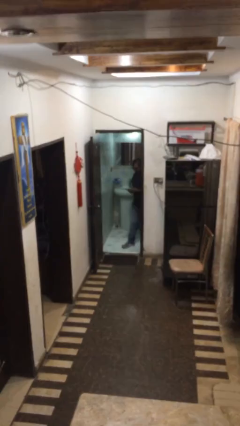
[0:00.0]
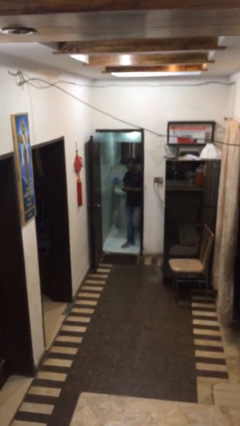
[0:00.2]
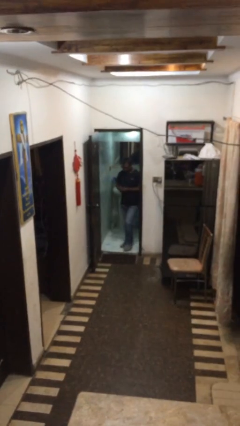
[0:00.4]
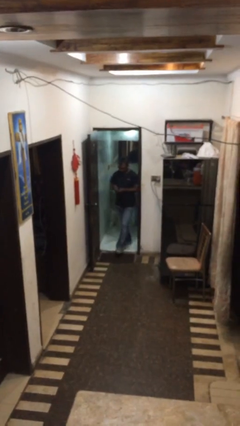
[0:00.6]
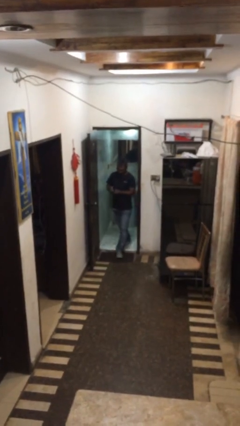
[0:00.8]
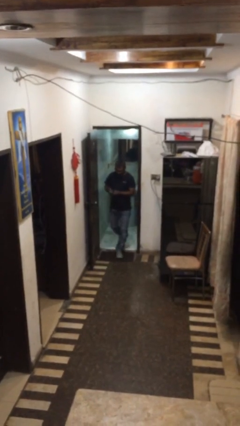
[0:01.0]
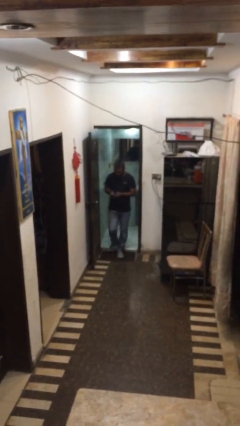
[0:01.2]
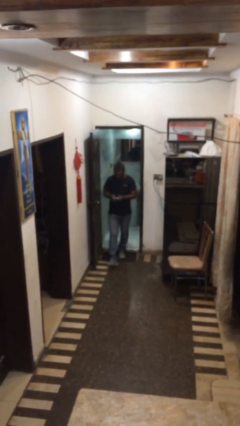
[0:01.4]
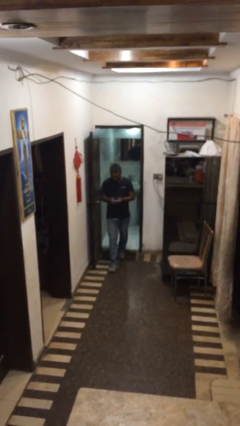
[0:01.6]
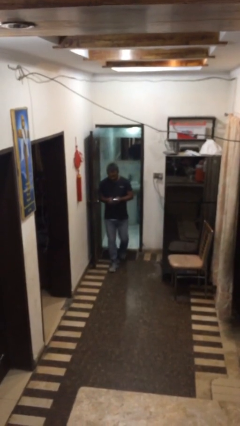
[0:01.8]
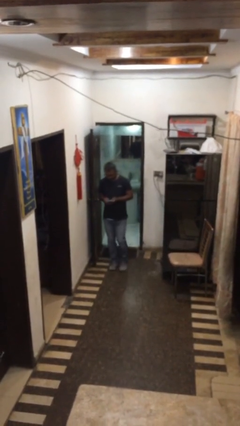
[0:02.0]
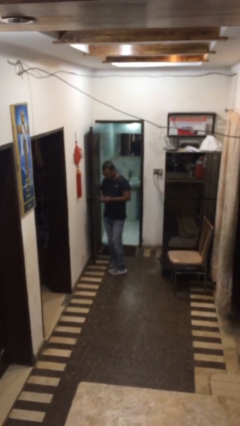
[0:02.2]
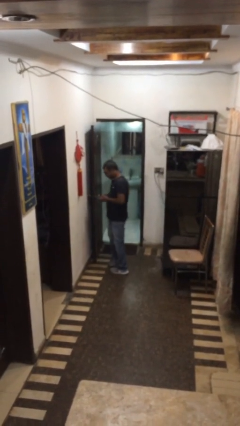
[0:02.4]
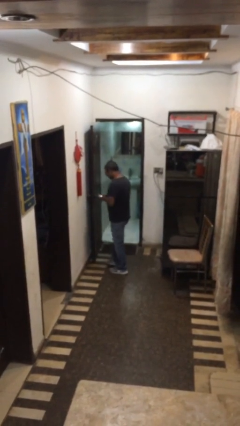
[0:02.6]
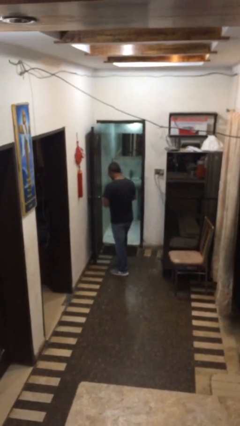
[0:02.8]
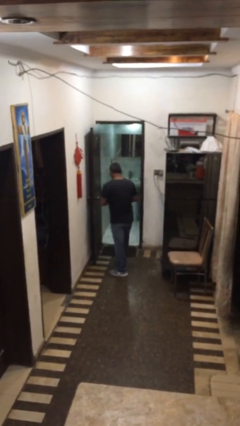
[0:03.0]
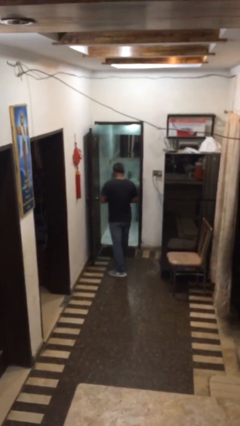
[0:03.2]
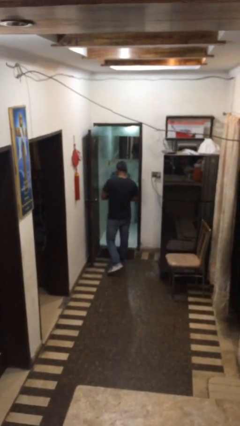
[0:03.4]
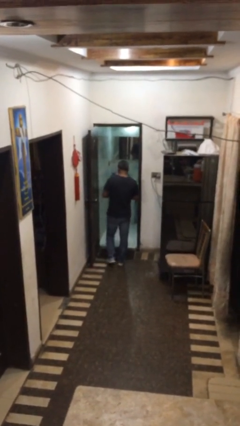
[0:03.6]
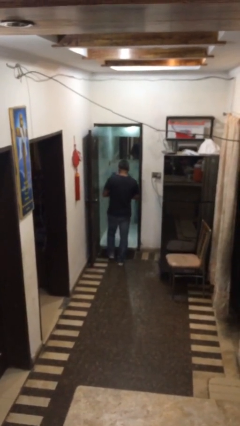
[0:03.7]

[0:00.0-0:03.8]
person enters scene through structure

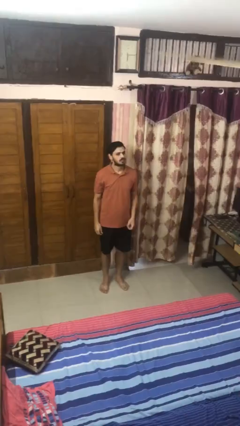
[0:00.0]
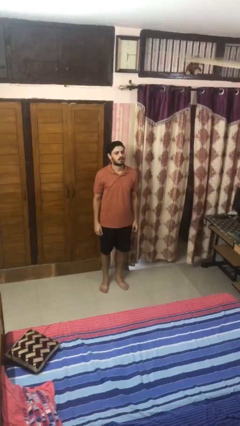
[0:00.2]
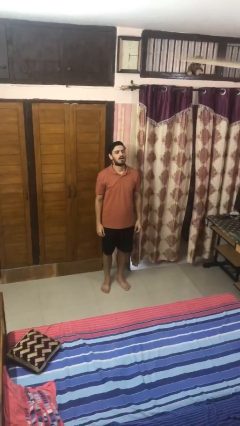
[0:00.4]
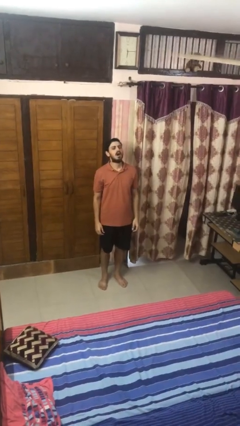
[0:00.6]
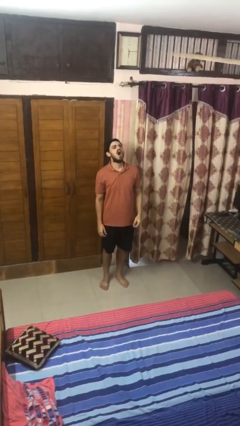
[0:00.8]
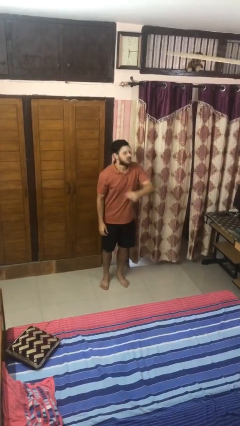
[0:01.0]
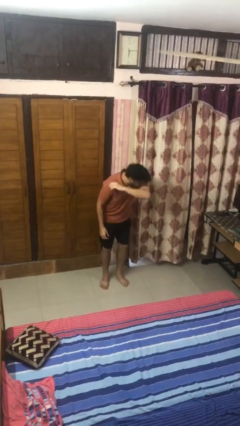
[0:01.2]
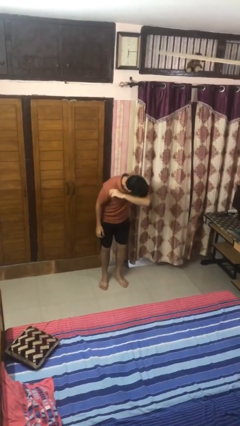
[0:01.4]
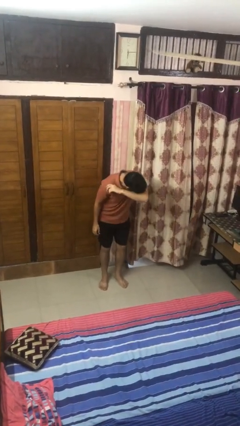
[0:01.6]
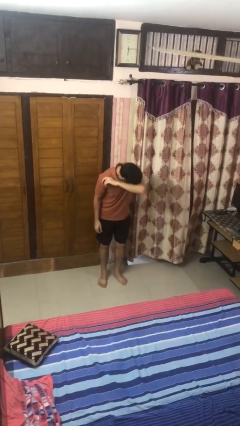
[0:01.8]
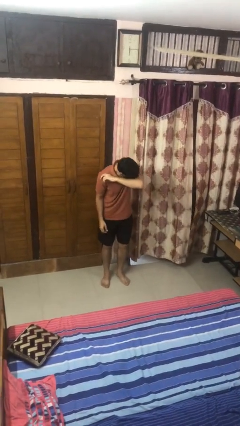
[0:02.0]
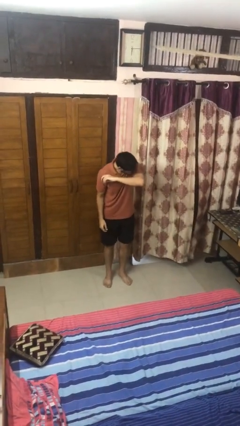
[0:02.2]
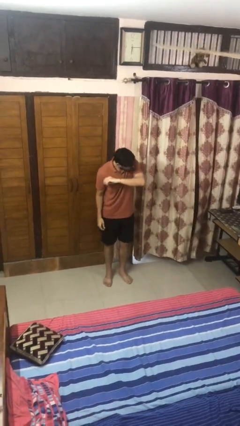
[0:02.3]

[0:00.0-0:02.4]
person sneezes into arm

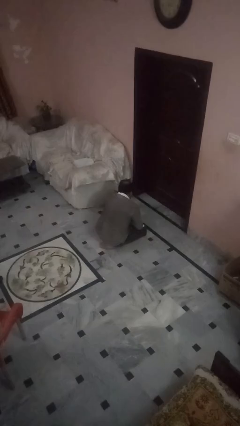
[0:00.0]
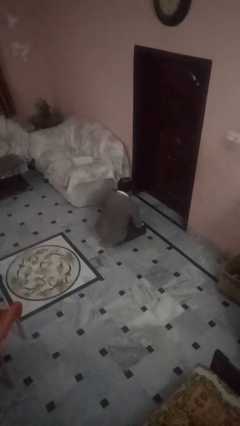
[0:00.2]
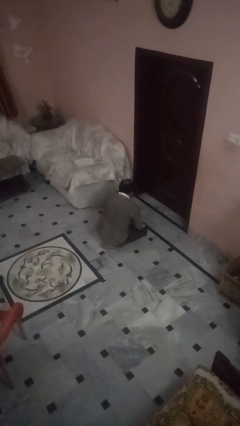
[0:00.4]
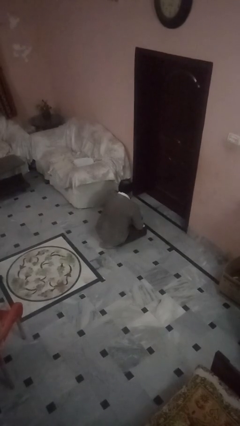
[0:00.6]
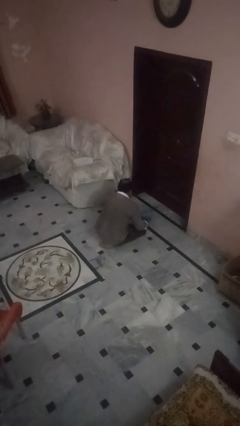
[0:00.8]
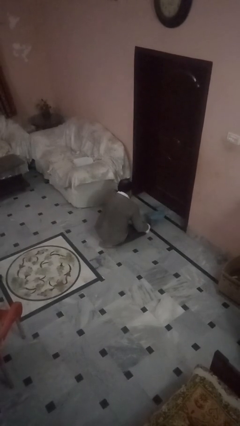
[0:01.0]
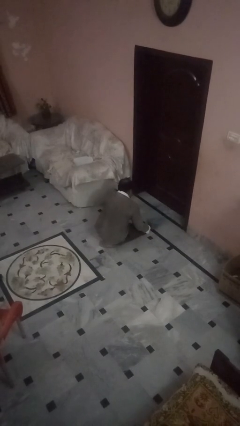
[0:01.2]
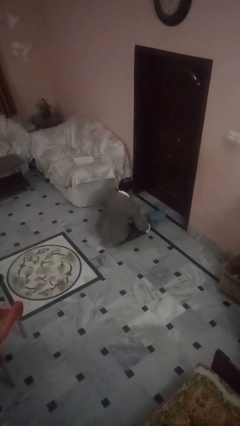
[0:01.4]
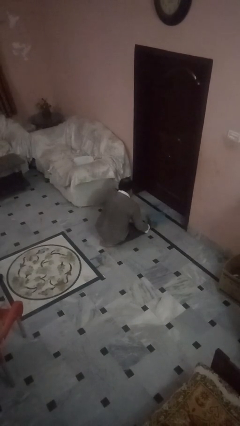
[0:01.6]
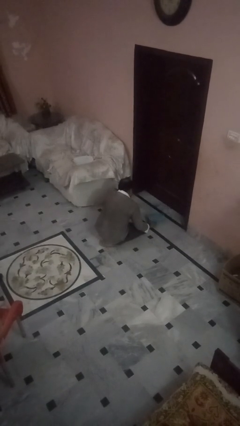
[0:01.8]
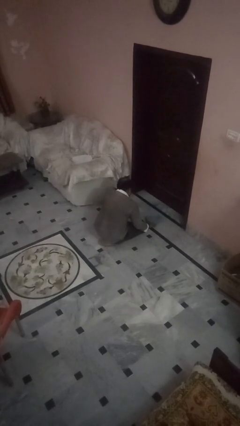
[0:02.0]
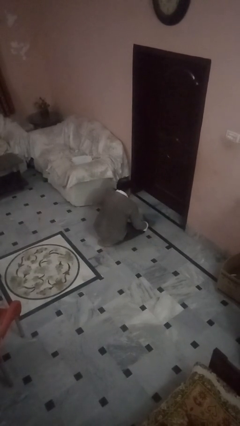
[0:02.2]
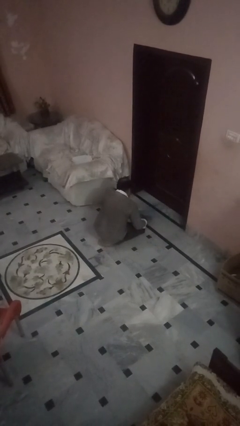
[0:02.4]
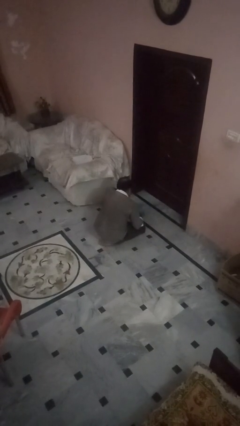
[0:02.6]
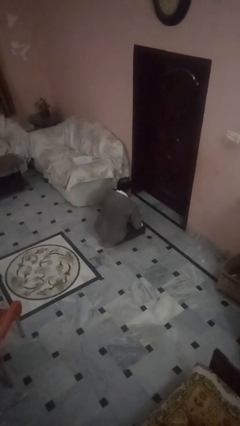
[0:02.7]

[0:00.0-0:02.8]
person swats bug

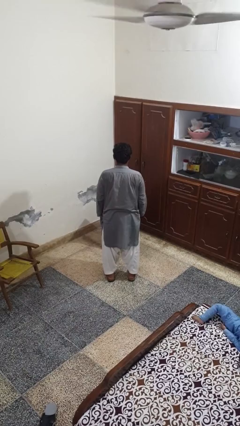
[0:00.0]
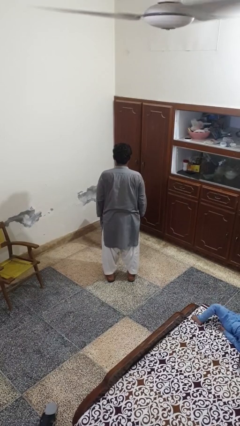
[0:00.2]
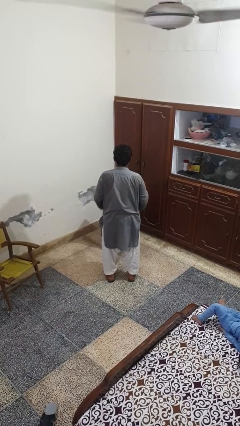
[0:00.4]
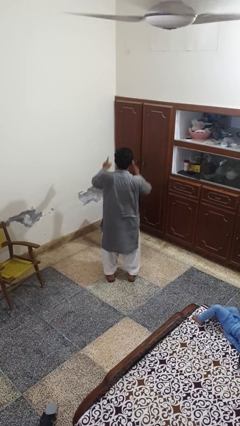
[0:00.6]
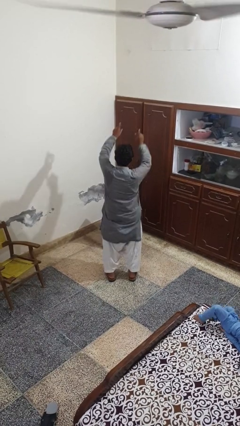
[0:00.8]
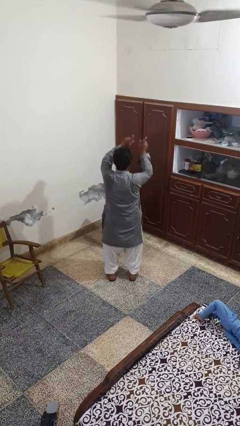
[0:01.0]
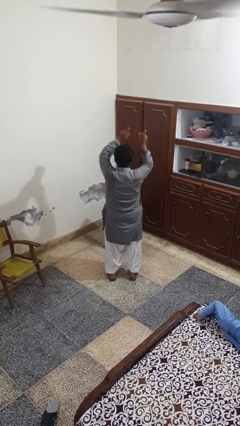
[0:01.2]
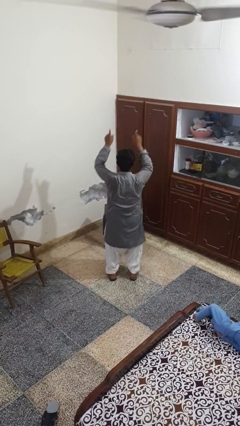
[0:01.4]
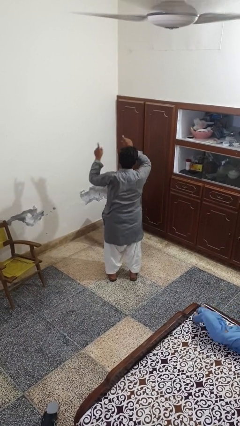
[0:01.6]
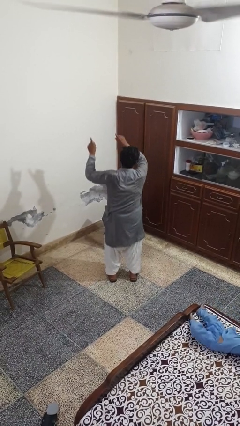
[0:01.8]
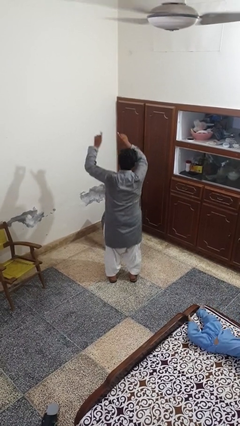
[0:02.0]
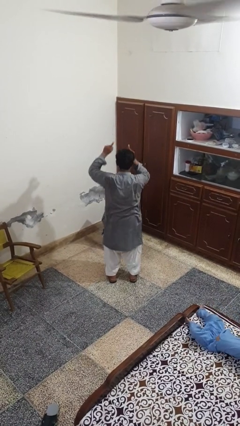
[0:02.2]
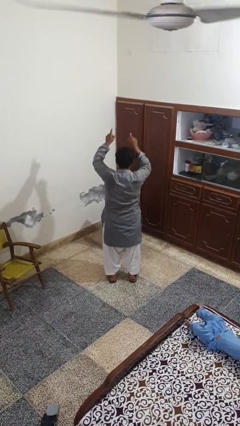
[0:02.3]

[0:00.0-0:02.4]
person dances in place

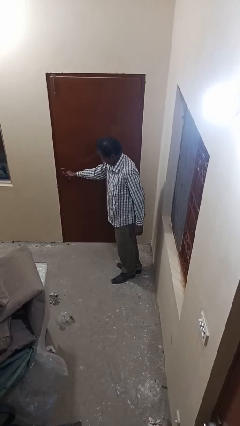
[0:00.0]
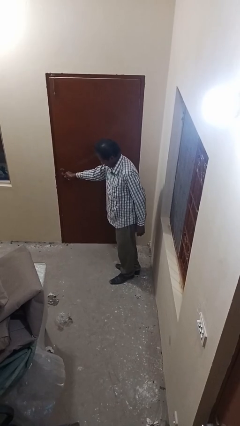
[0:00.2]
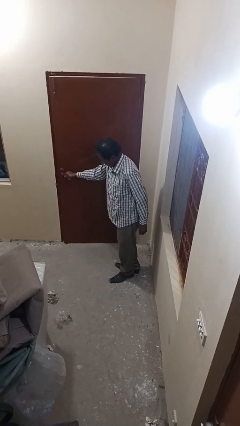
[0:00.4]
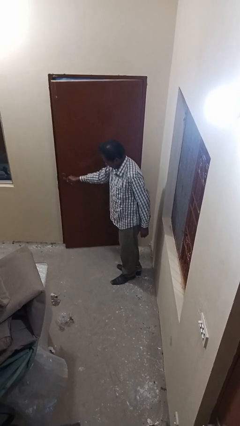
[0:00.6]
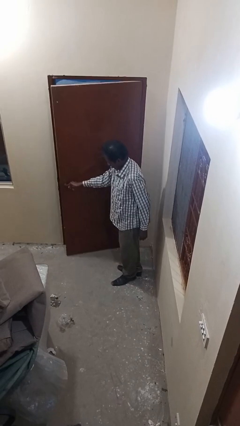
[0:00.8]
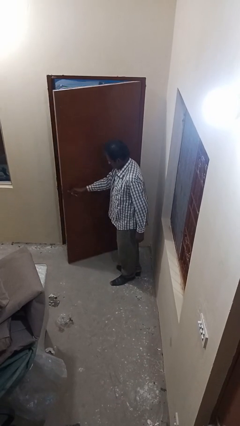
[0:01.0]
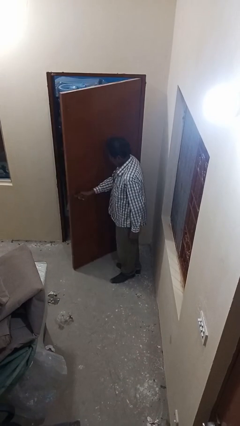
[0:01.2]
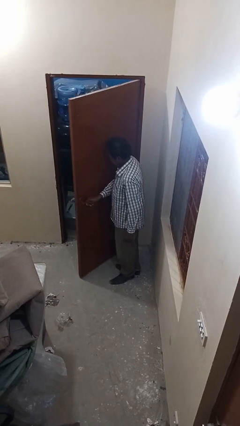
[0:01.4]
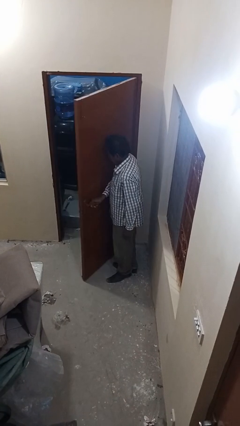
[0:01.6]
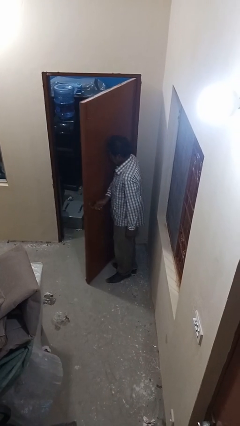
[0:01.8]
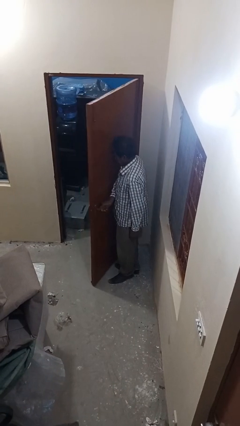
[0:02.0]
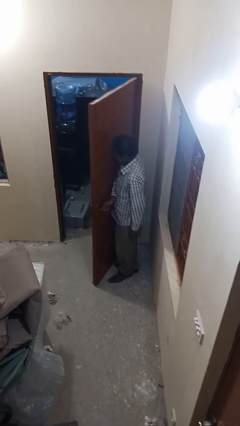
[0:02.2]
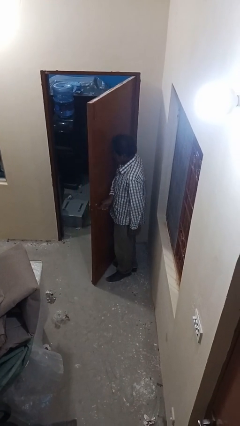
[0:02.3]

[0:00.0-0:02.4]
person opens facility door

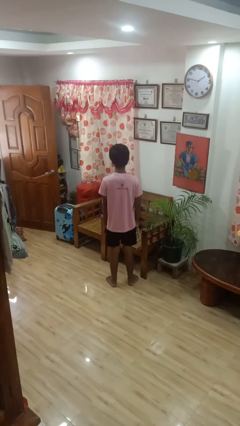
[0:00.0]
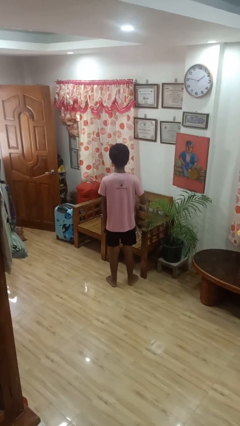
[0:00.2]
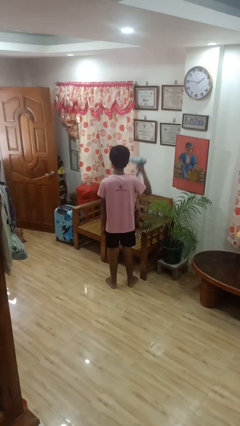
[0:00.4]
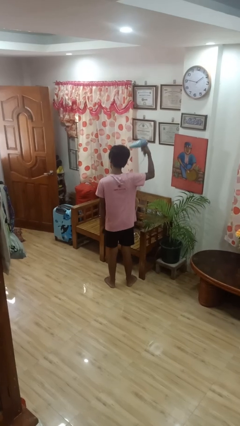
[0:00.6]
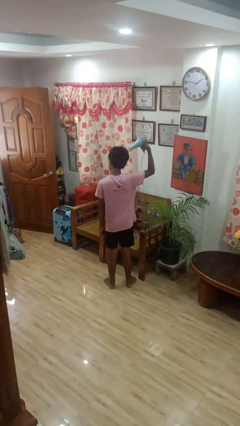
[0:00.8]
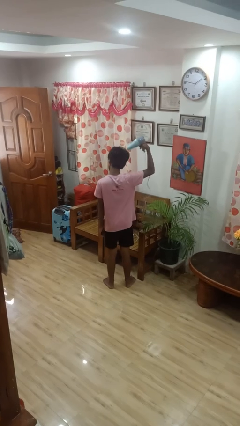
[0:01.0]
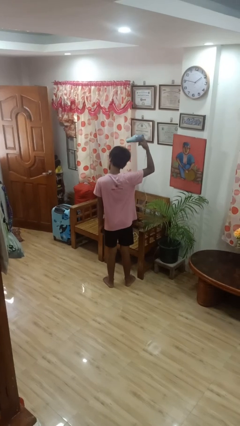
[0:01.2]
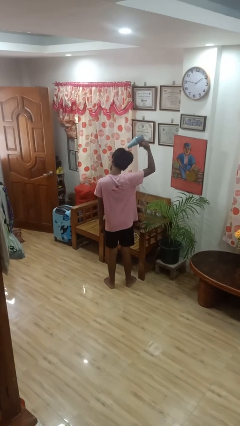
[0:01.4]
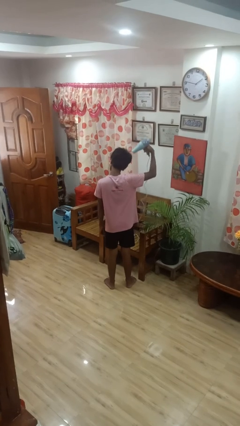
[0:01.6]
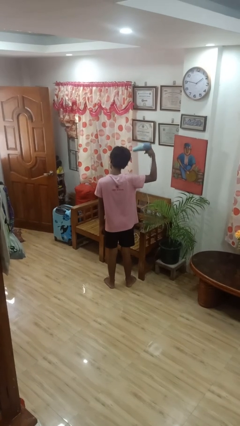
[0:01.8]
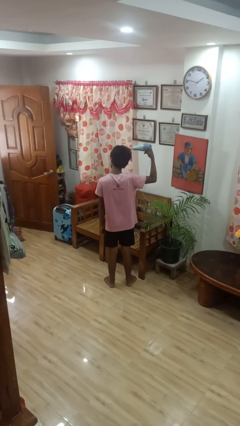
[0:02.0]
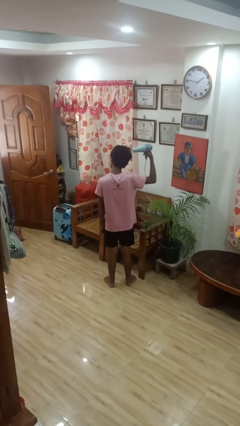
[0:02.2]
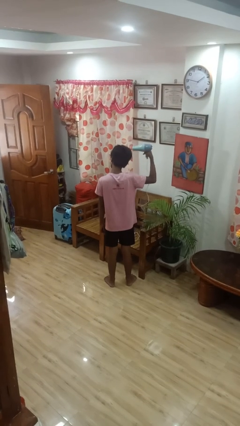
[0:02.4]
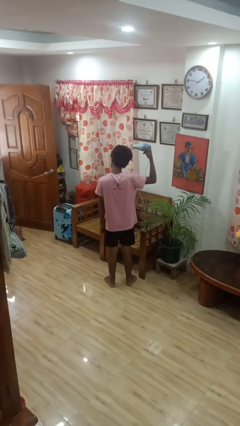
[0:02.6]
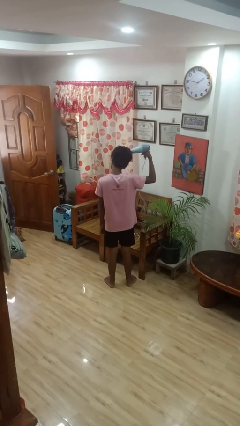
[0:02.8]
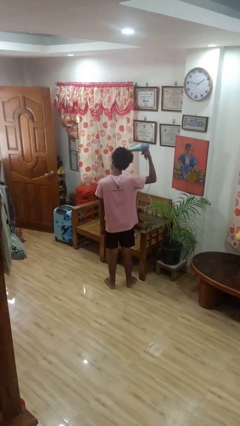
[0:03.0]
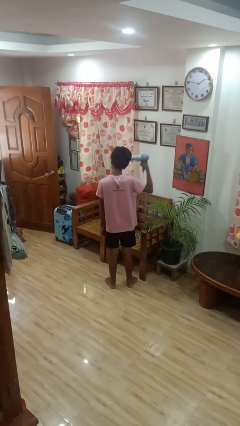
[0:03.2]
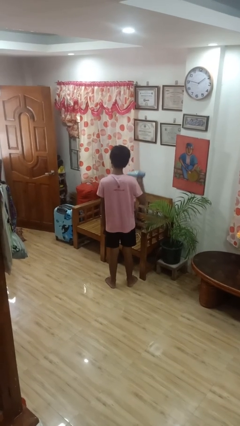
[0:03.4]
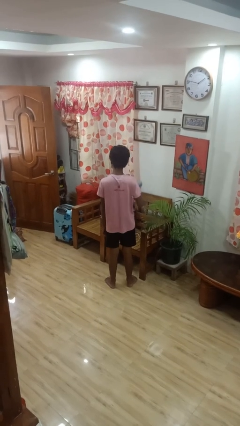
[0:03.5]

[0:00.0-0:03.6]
person dries hair with hairdryer
